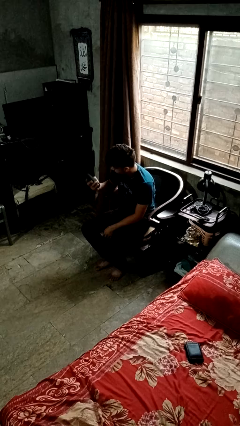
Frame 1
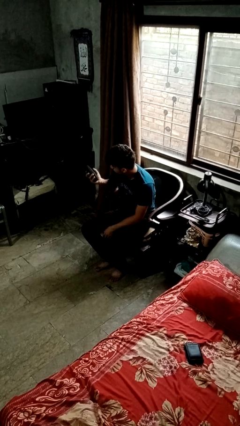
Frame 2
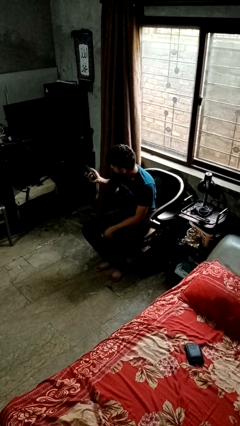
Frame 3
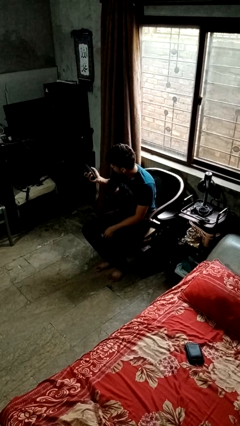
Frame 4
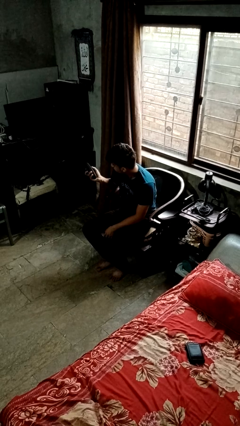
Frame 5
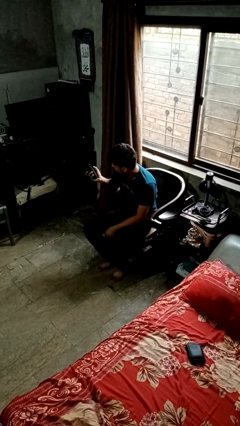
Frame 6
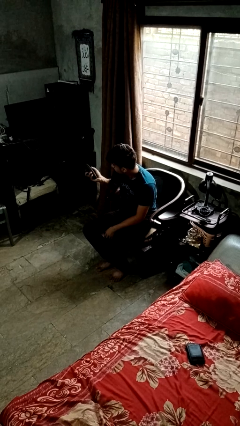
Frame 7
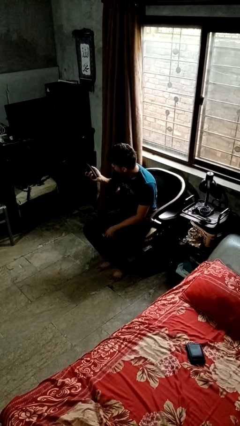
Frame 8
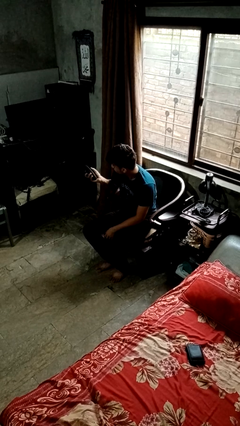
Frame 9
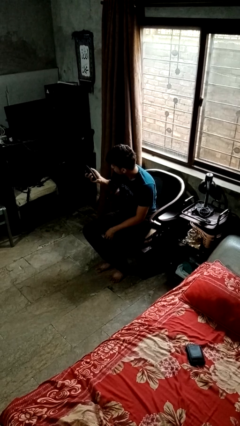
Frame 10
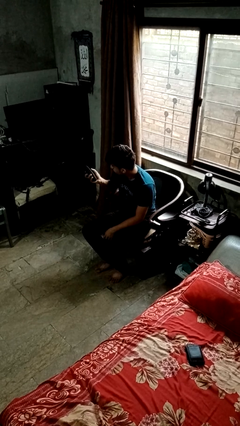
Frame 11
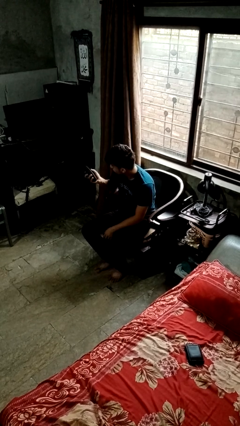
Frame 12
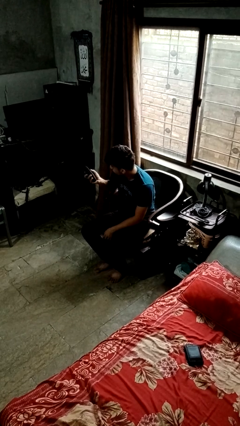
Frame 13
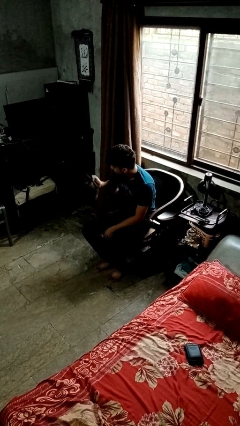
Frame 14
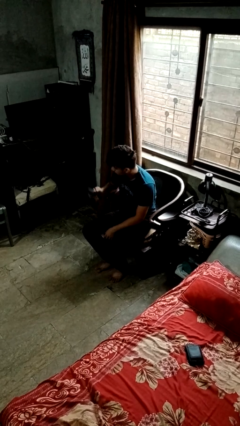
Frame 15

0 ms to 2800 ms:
person uses television remote

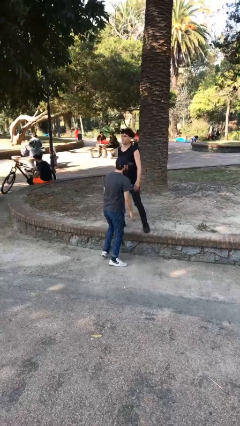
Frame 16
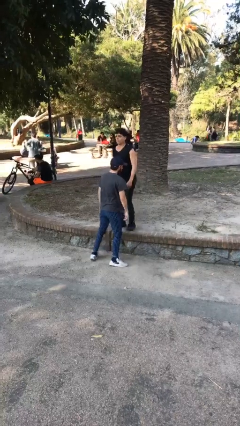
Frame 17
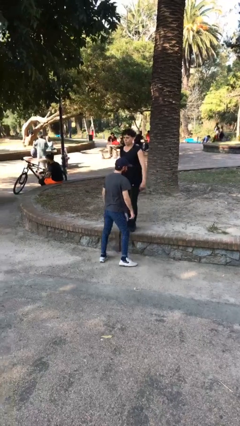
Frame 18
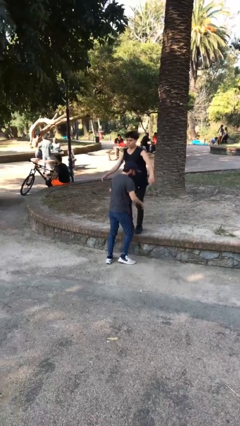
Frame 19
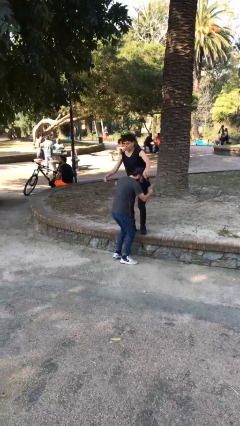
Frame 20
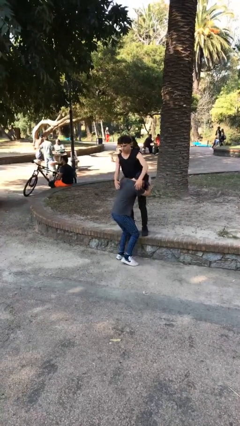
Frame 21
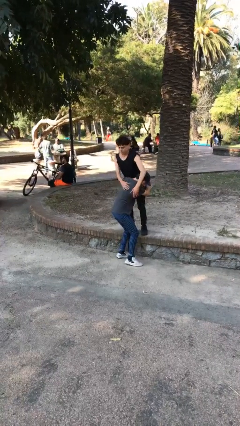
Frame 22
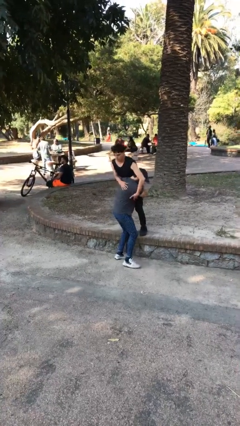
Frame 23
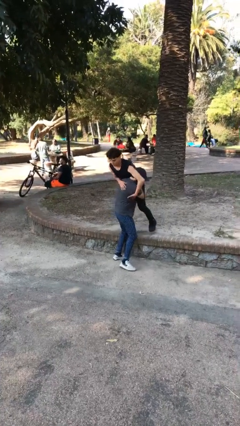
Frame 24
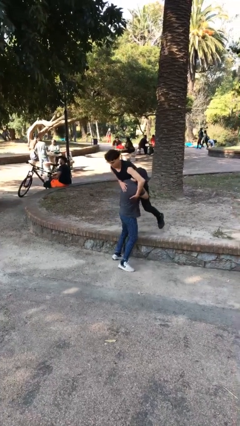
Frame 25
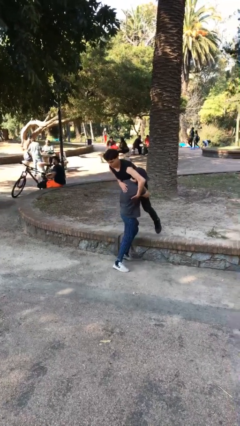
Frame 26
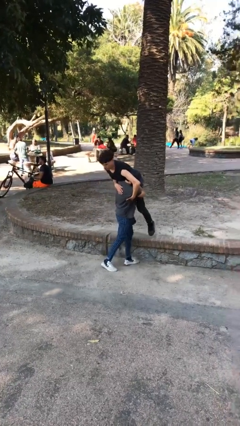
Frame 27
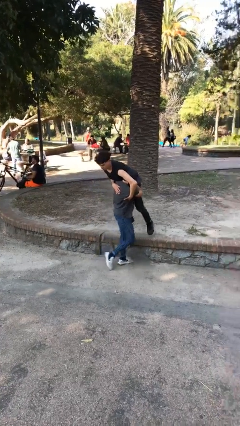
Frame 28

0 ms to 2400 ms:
person carries person over shoulder

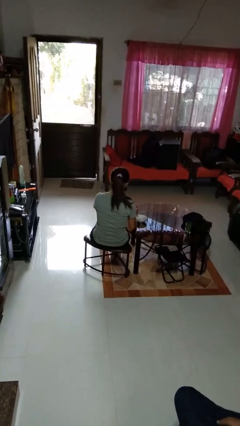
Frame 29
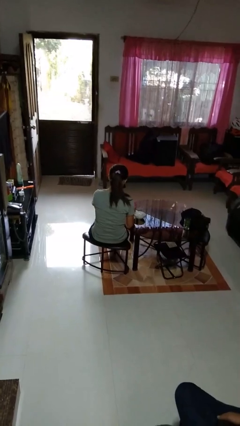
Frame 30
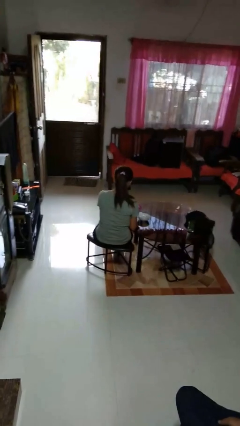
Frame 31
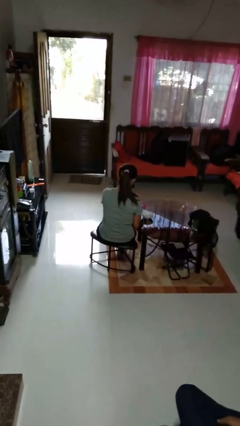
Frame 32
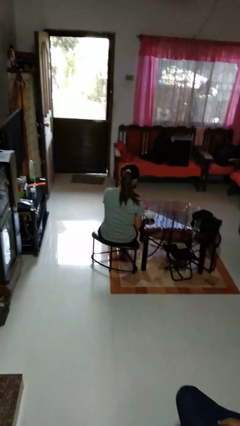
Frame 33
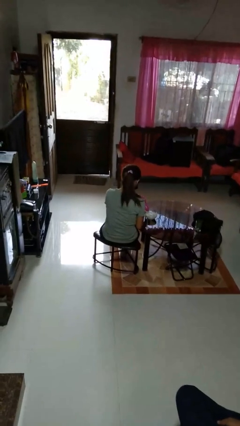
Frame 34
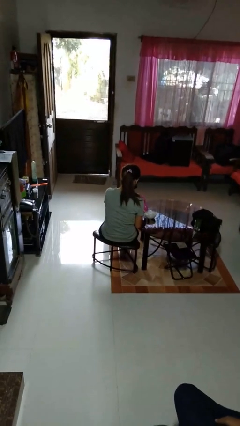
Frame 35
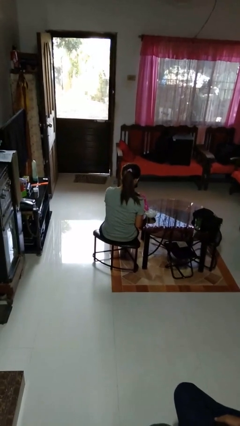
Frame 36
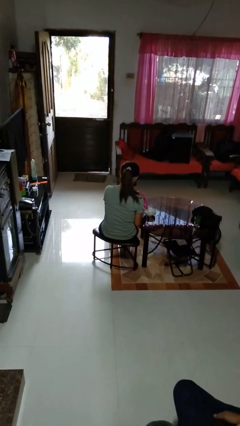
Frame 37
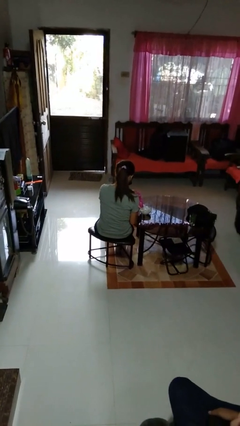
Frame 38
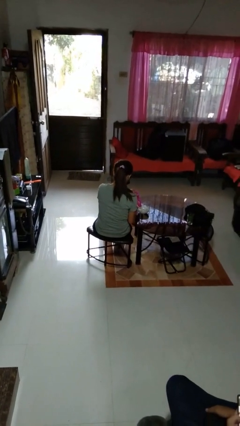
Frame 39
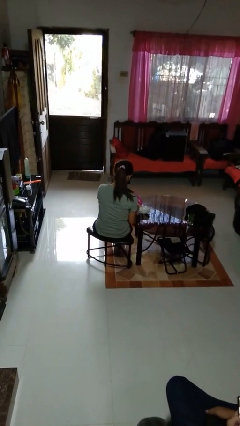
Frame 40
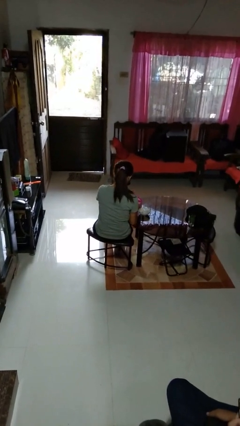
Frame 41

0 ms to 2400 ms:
person pours into bowl

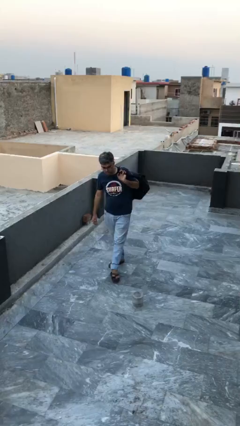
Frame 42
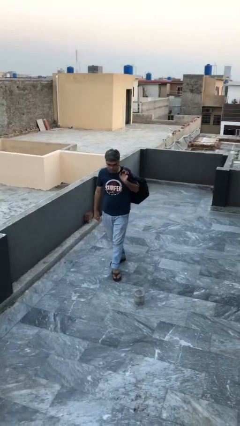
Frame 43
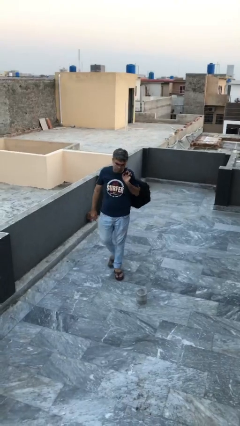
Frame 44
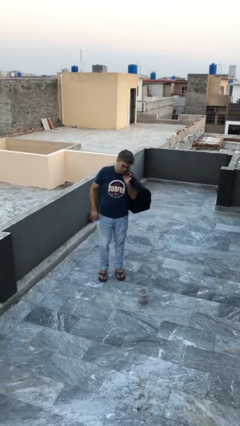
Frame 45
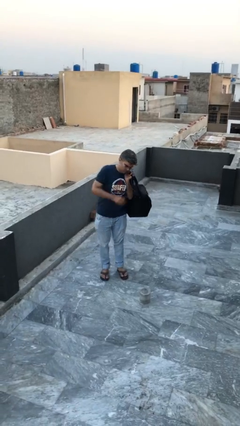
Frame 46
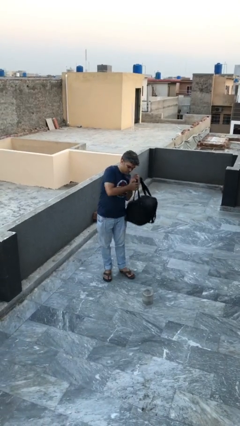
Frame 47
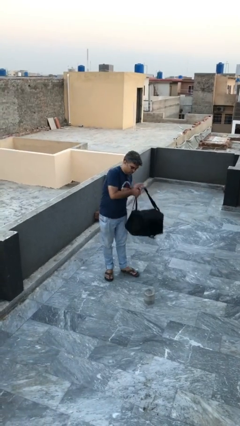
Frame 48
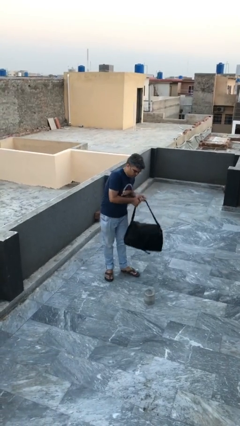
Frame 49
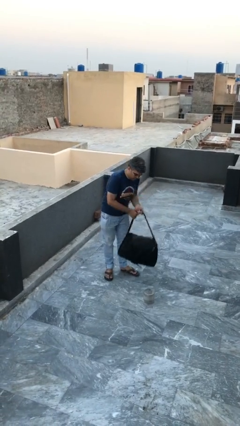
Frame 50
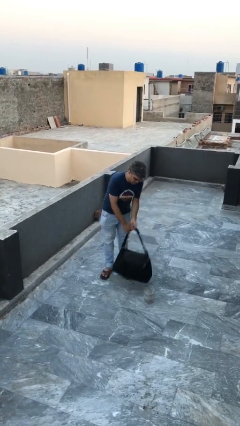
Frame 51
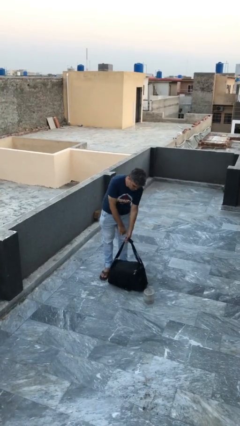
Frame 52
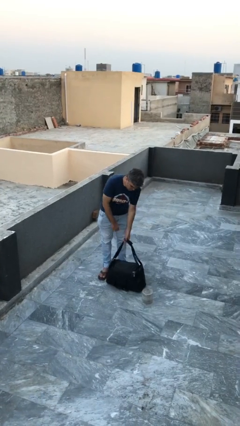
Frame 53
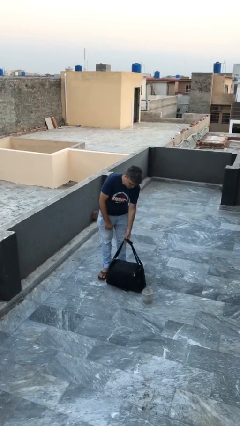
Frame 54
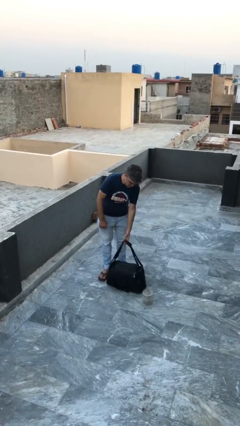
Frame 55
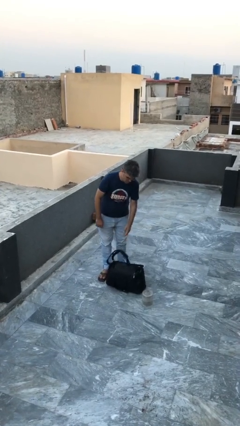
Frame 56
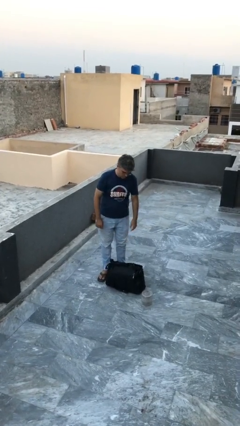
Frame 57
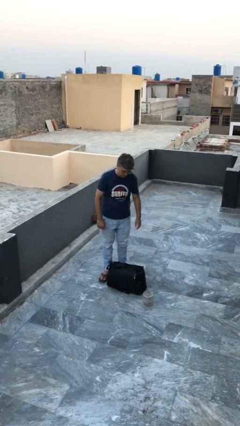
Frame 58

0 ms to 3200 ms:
person puts down object on floor

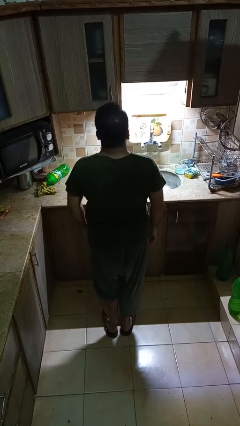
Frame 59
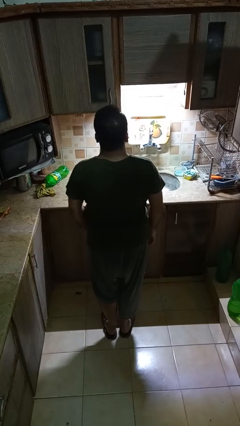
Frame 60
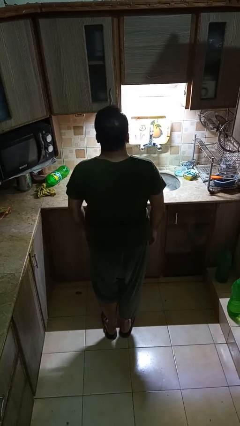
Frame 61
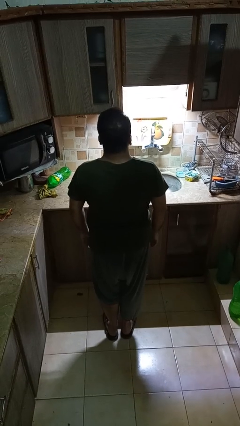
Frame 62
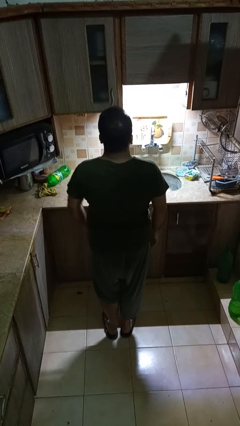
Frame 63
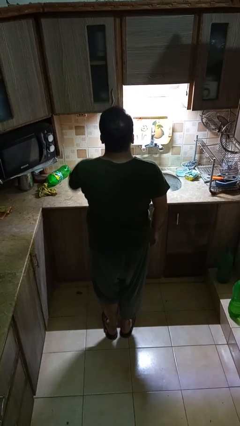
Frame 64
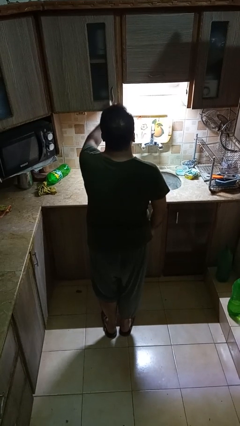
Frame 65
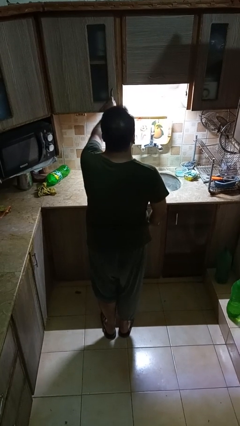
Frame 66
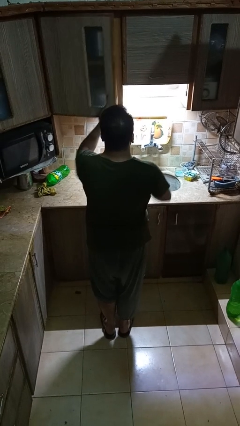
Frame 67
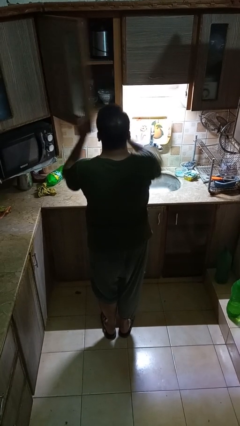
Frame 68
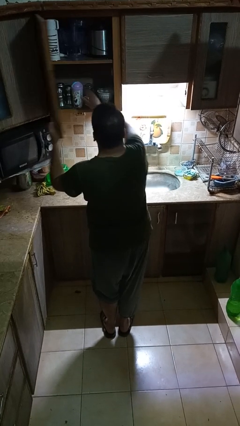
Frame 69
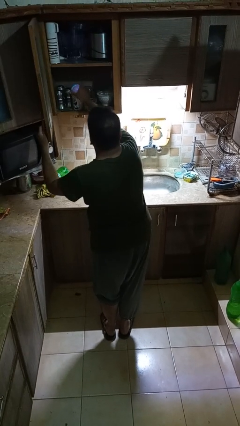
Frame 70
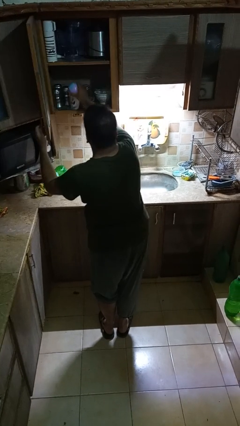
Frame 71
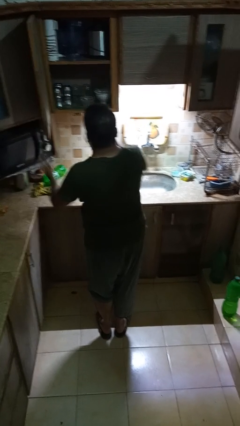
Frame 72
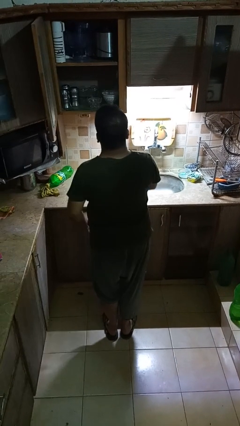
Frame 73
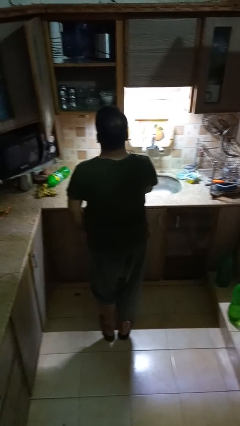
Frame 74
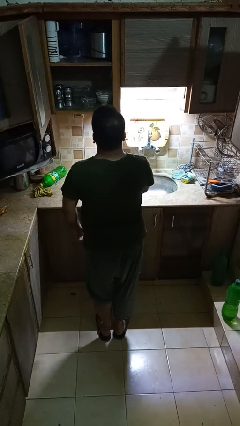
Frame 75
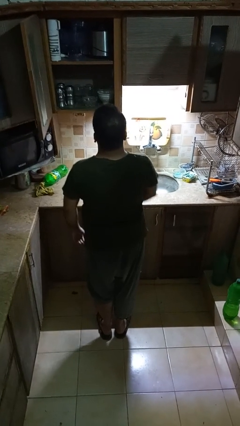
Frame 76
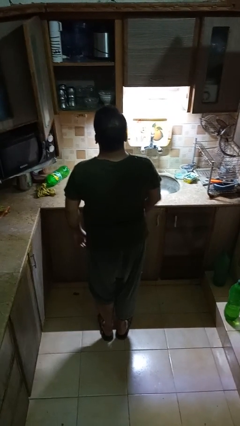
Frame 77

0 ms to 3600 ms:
person takes object from cabinet

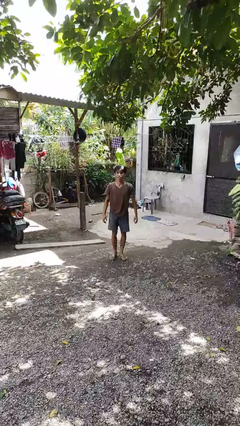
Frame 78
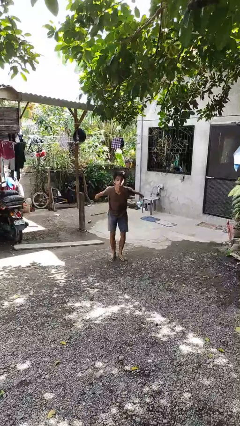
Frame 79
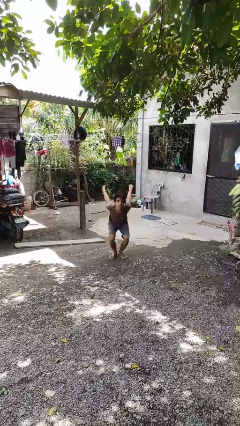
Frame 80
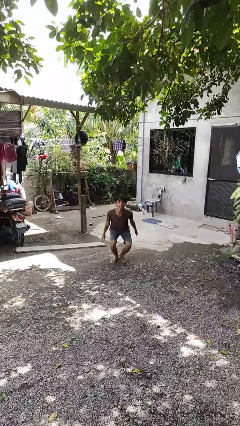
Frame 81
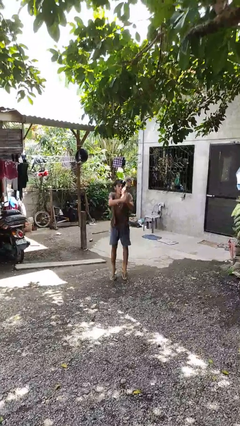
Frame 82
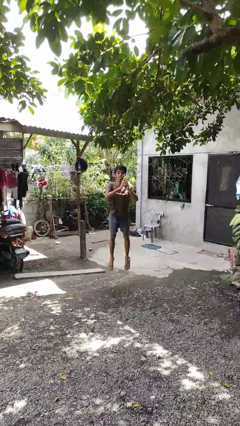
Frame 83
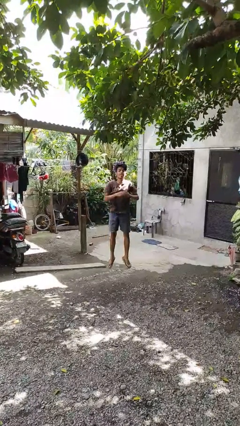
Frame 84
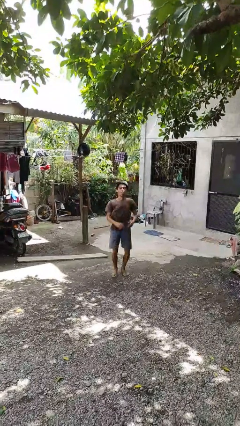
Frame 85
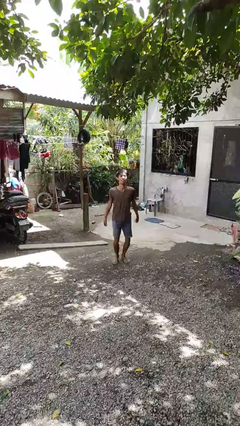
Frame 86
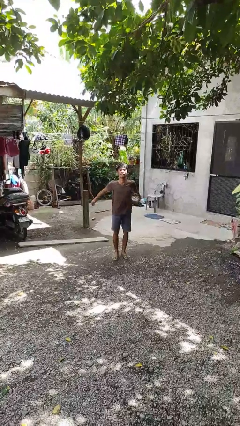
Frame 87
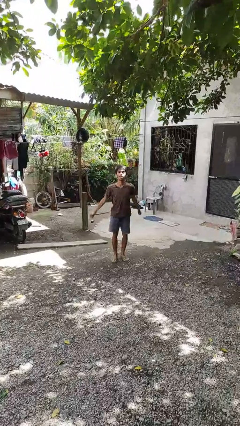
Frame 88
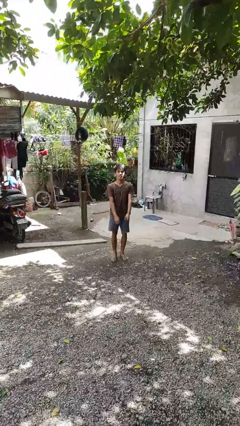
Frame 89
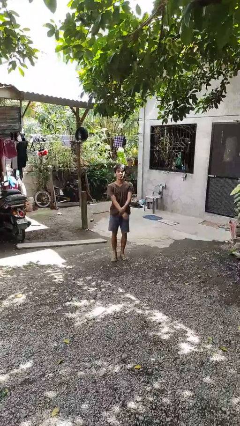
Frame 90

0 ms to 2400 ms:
person jumps
